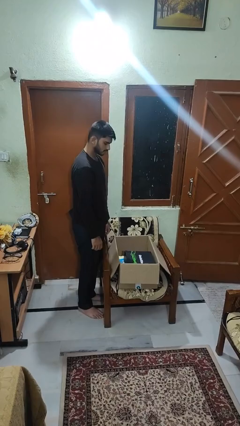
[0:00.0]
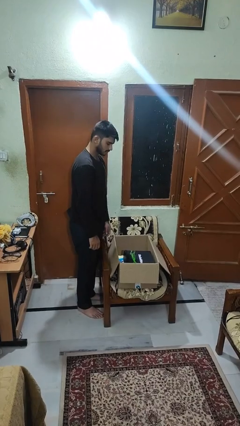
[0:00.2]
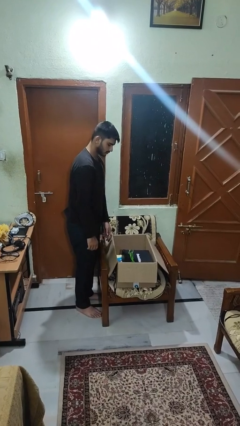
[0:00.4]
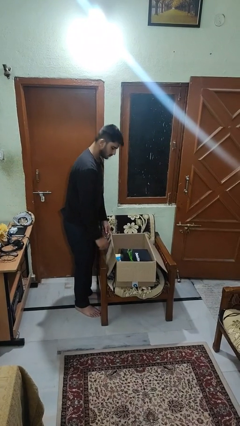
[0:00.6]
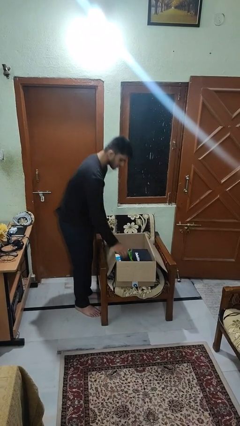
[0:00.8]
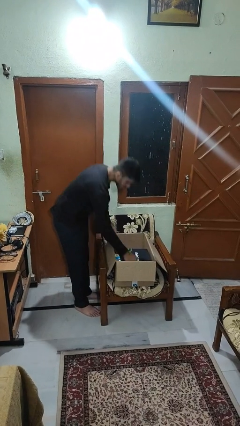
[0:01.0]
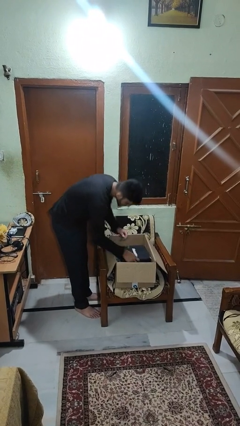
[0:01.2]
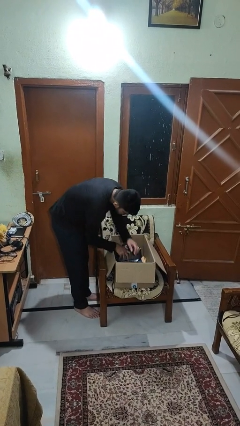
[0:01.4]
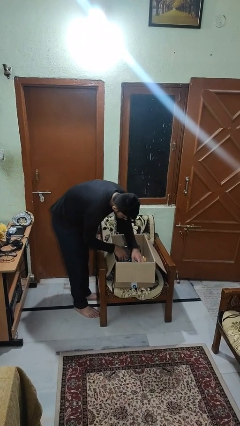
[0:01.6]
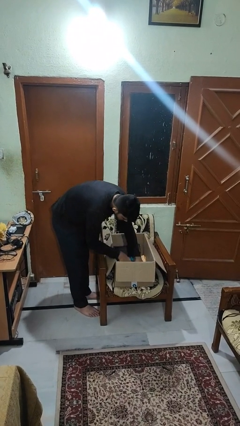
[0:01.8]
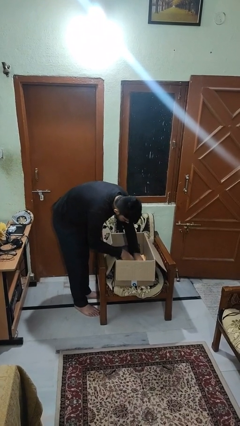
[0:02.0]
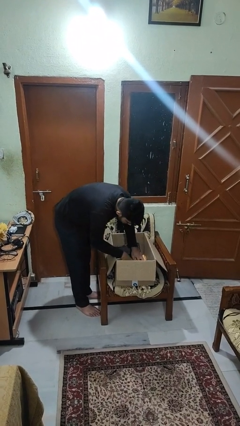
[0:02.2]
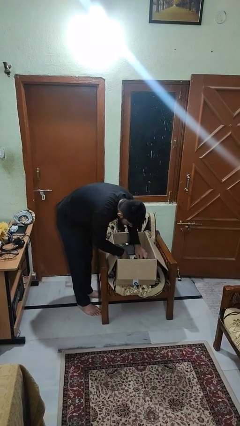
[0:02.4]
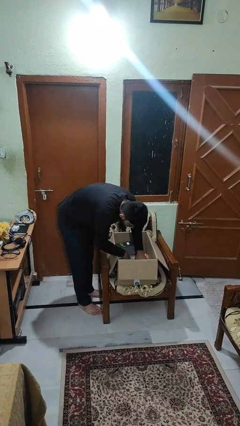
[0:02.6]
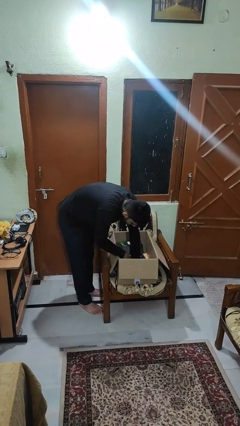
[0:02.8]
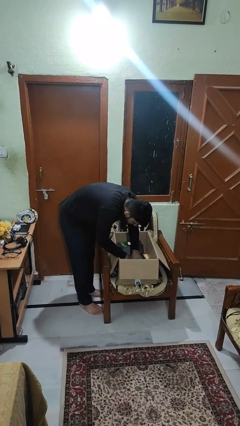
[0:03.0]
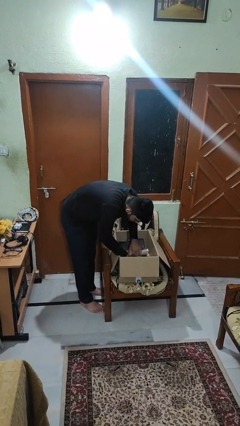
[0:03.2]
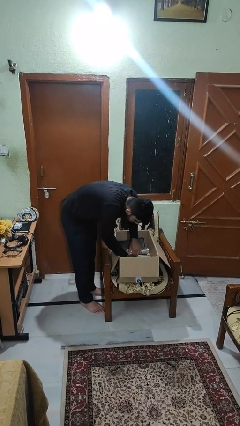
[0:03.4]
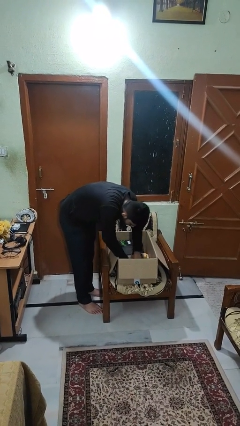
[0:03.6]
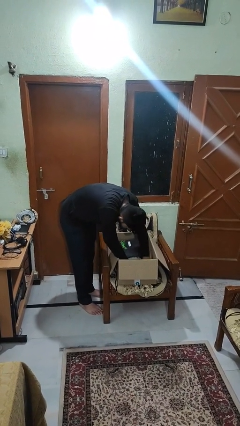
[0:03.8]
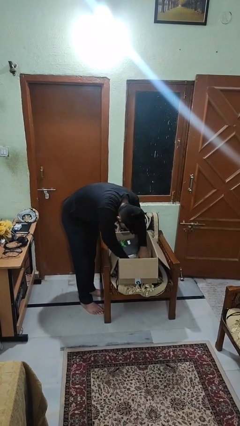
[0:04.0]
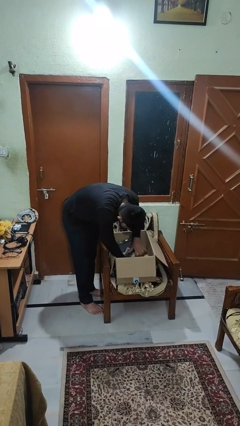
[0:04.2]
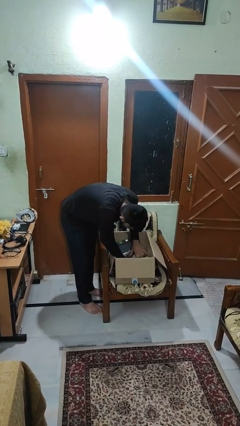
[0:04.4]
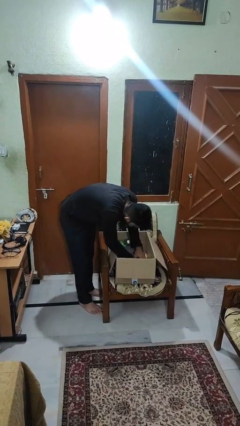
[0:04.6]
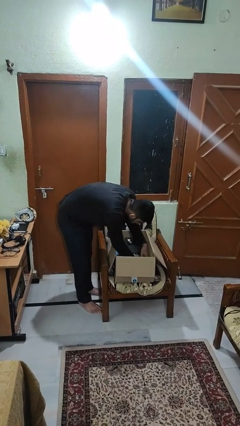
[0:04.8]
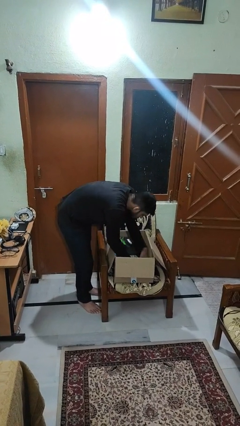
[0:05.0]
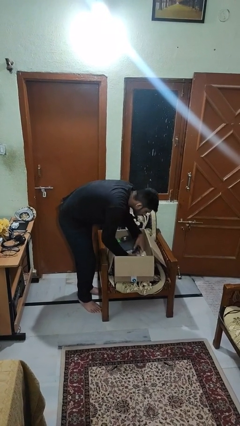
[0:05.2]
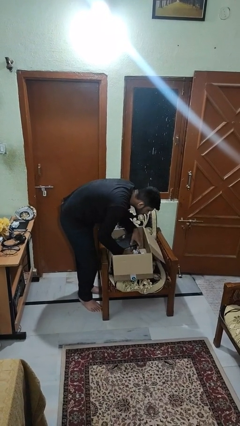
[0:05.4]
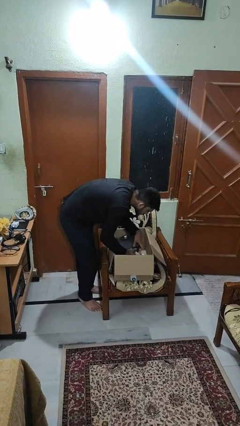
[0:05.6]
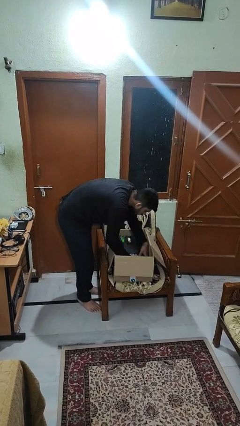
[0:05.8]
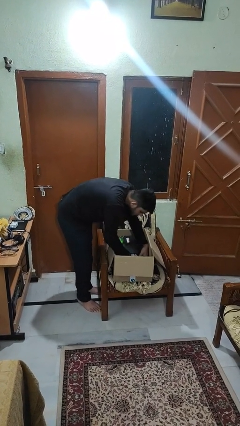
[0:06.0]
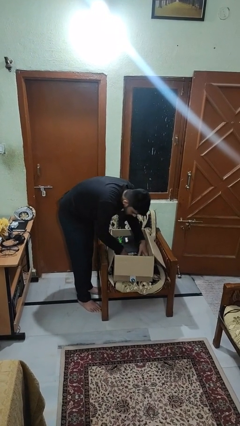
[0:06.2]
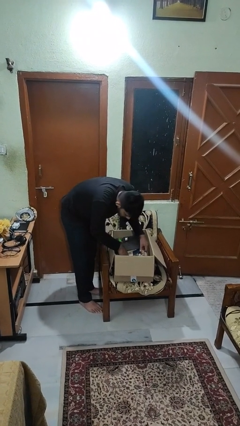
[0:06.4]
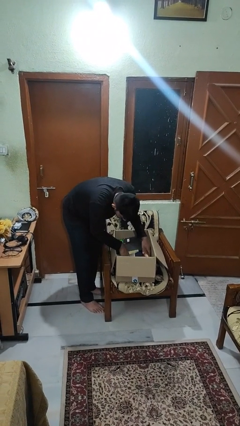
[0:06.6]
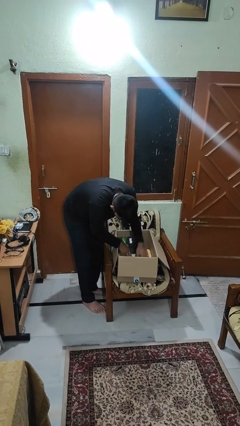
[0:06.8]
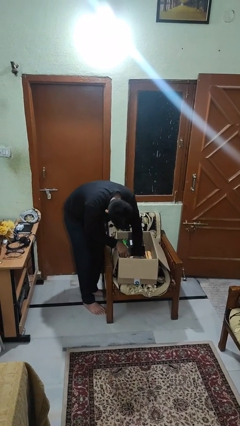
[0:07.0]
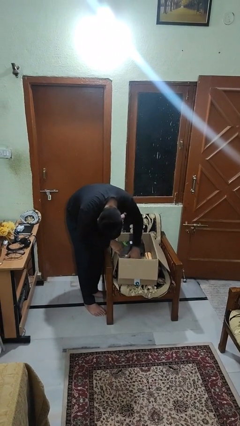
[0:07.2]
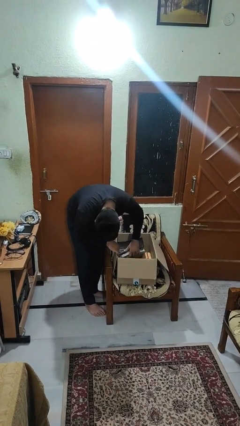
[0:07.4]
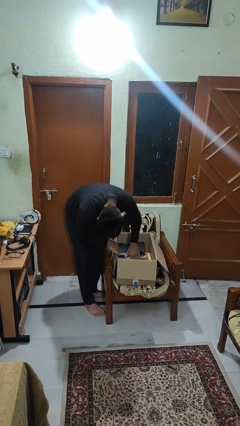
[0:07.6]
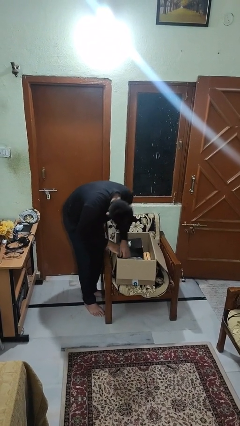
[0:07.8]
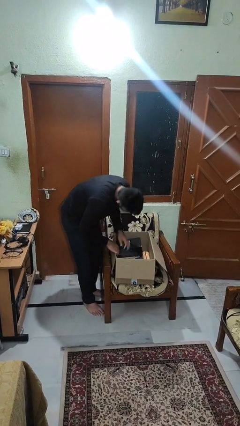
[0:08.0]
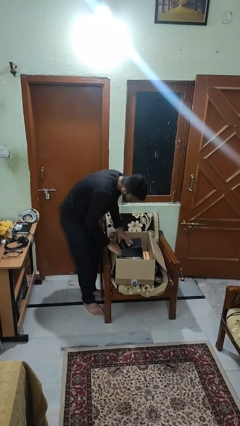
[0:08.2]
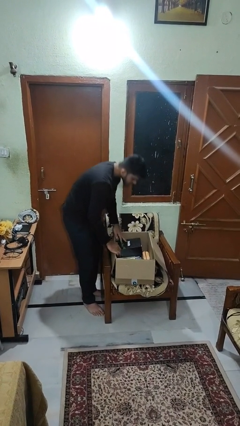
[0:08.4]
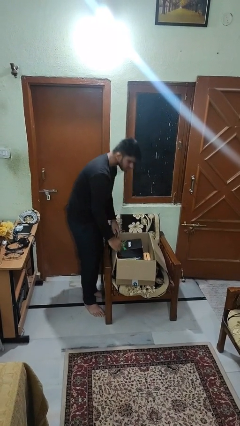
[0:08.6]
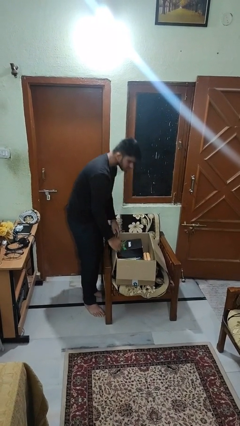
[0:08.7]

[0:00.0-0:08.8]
person searches in box

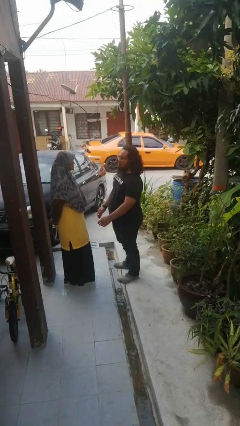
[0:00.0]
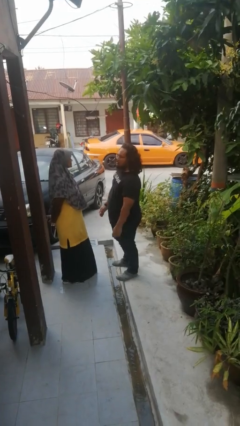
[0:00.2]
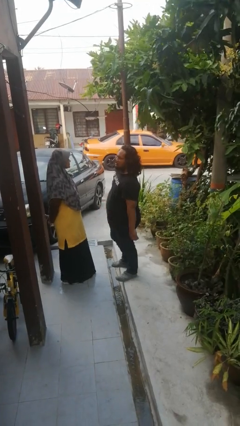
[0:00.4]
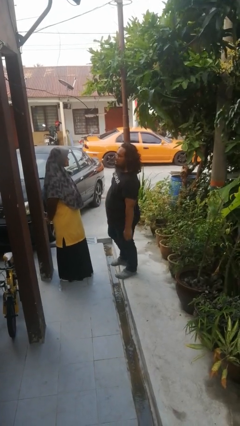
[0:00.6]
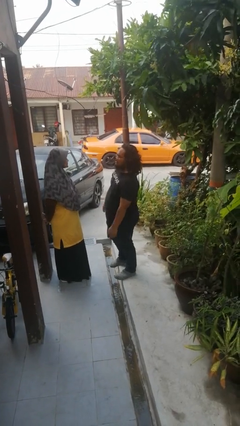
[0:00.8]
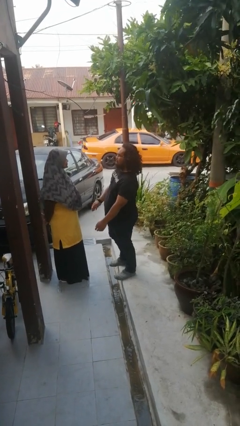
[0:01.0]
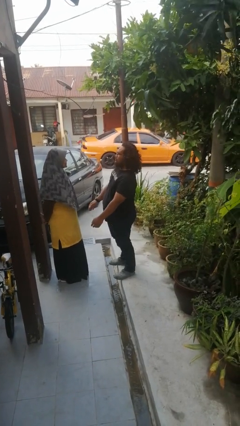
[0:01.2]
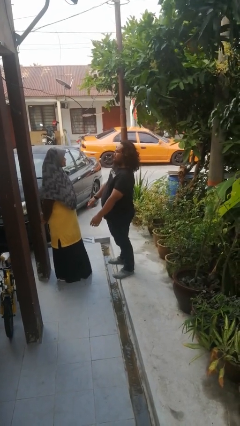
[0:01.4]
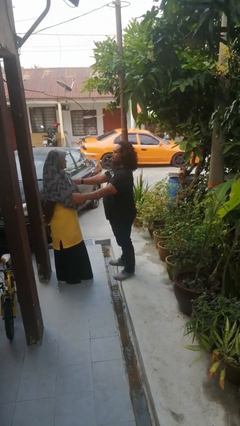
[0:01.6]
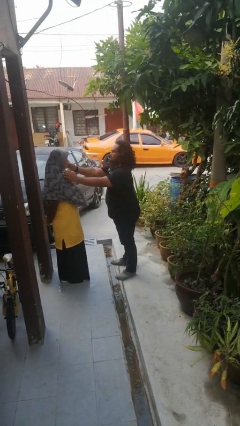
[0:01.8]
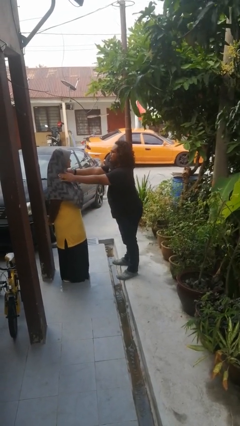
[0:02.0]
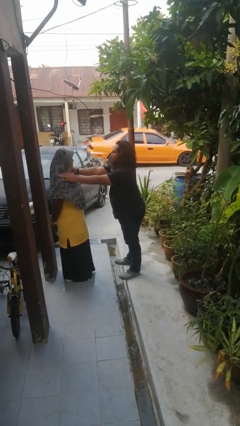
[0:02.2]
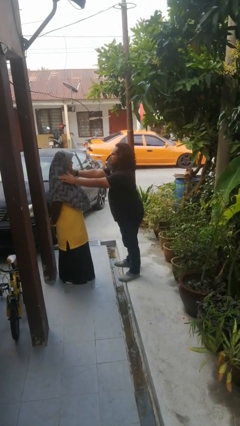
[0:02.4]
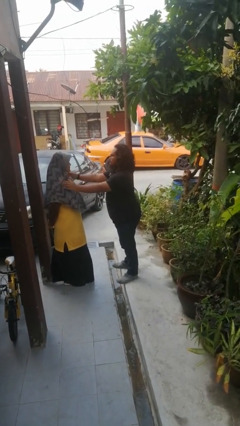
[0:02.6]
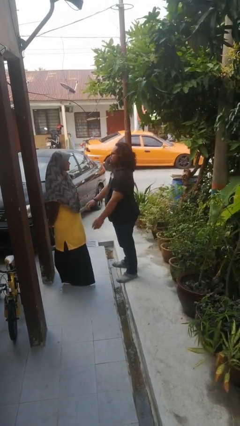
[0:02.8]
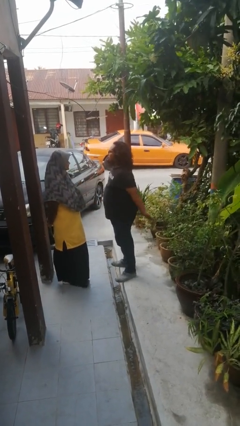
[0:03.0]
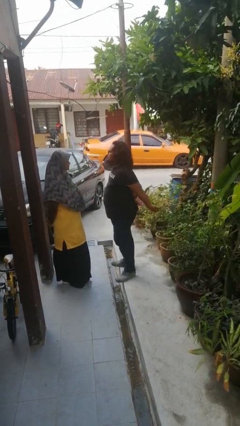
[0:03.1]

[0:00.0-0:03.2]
person pounds shoulders of person

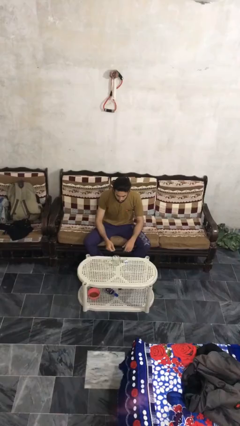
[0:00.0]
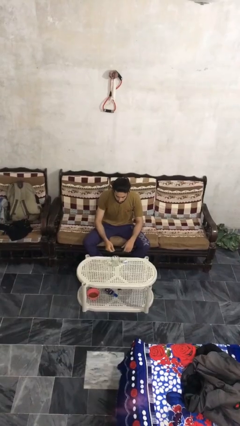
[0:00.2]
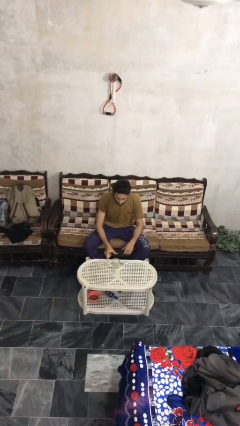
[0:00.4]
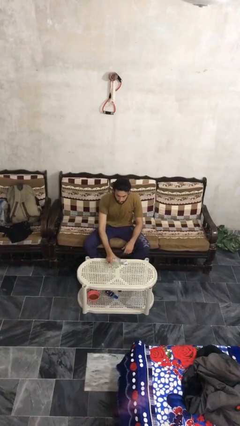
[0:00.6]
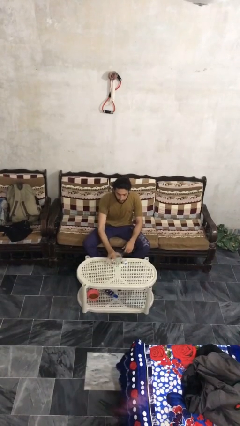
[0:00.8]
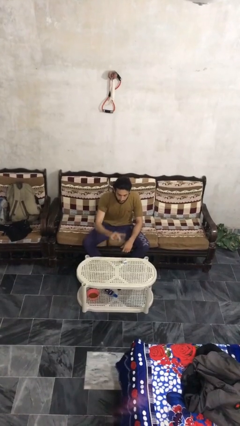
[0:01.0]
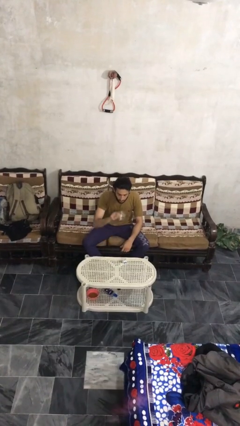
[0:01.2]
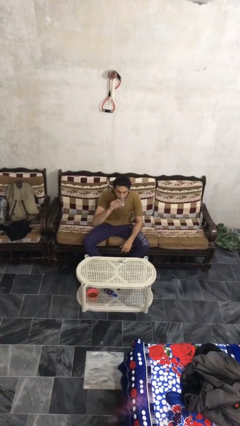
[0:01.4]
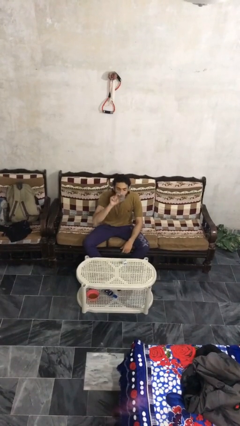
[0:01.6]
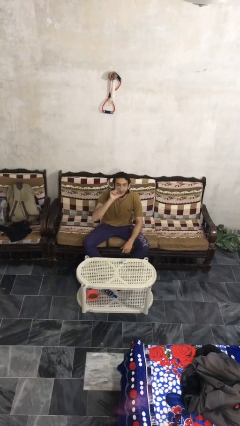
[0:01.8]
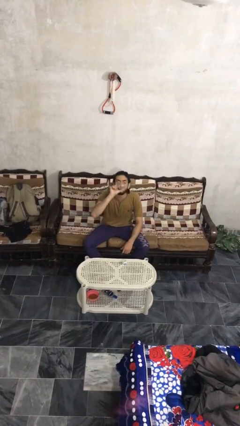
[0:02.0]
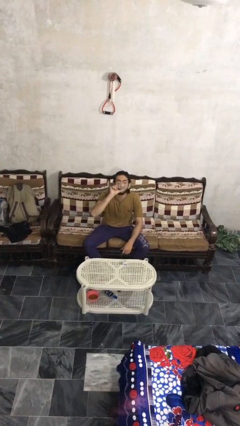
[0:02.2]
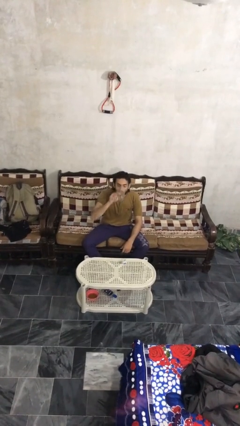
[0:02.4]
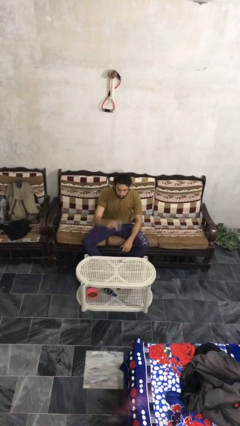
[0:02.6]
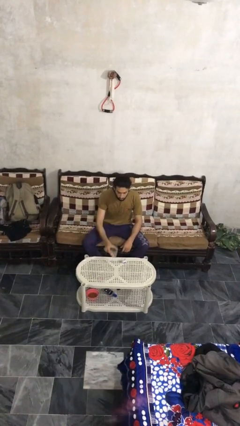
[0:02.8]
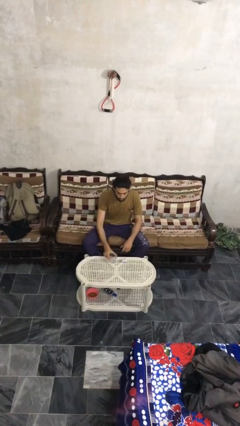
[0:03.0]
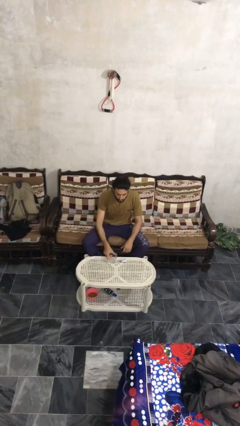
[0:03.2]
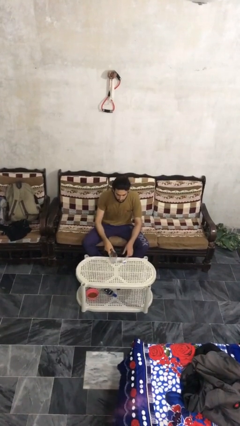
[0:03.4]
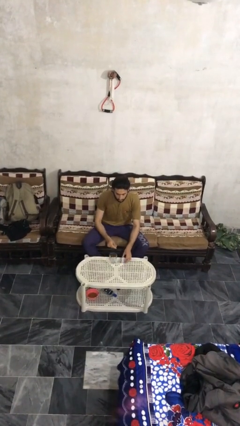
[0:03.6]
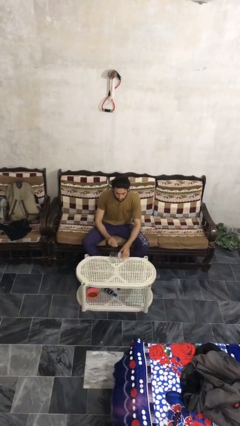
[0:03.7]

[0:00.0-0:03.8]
person drinks from cup

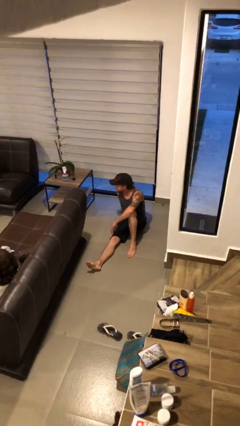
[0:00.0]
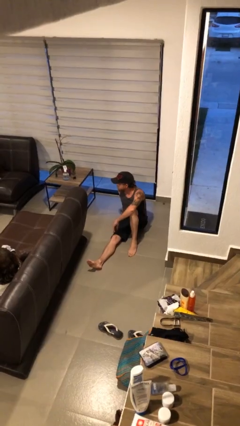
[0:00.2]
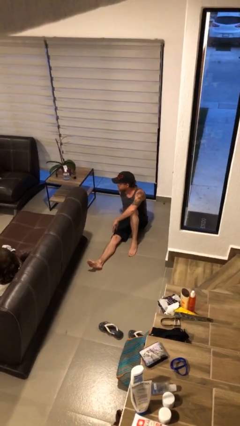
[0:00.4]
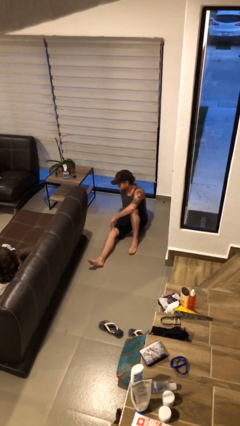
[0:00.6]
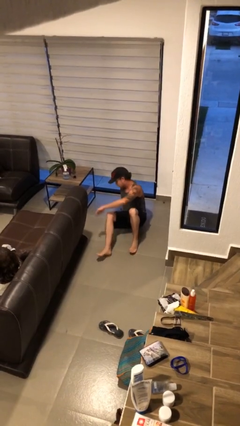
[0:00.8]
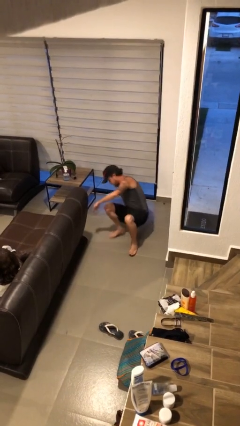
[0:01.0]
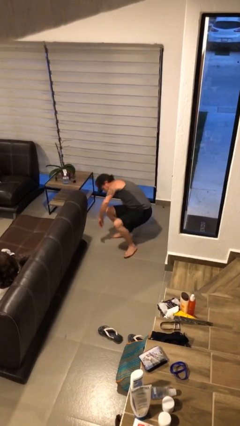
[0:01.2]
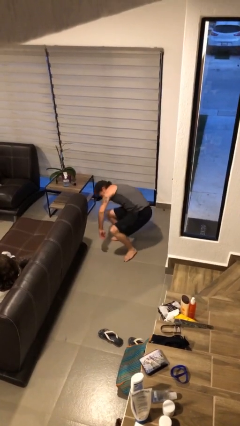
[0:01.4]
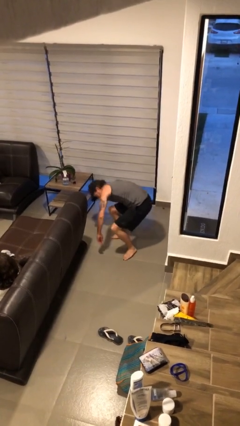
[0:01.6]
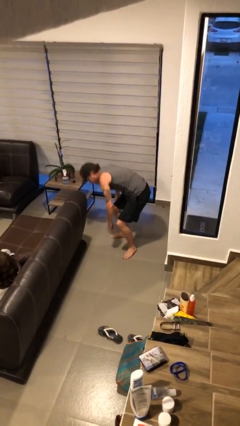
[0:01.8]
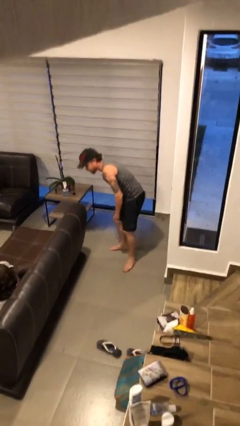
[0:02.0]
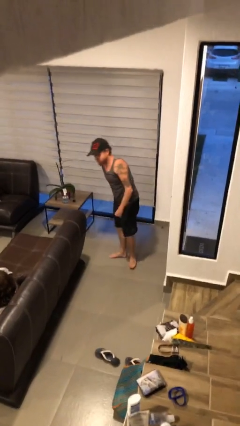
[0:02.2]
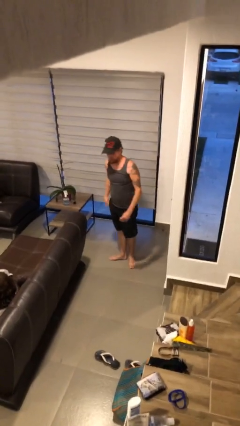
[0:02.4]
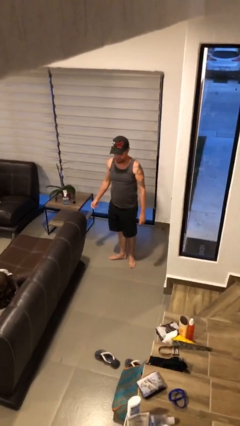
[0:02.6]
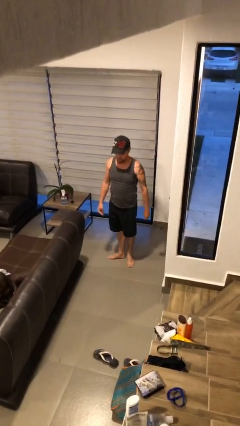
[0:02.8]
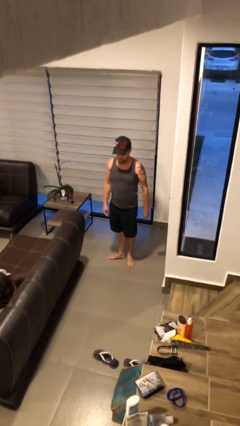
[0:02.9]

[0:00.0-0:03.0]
person stands up
